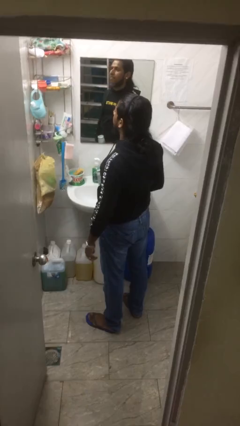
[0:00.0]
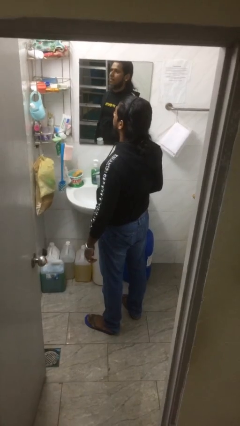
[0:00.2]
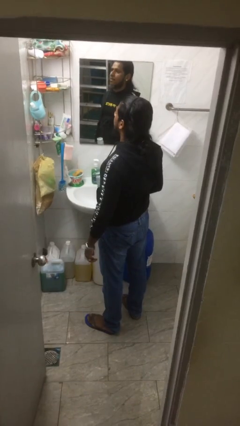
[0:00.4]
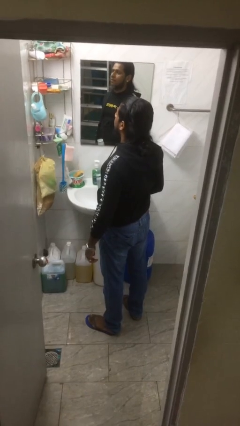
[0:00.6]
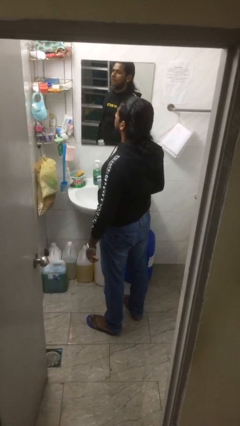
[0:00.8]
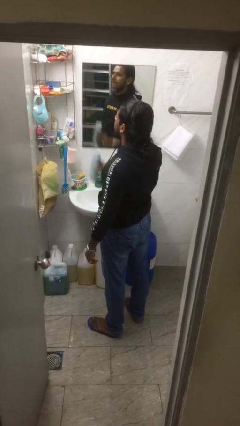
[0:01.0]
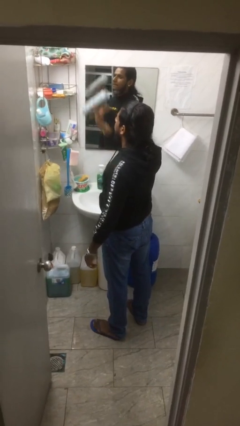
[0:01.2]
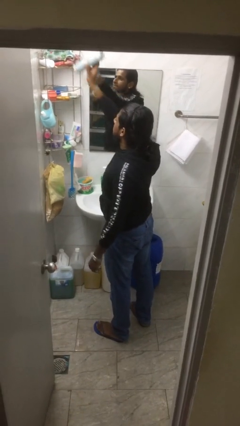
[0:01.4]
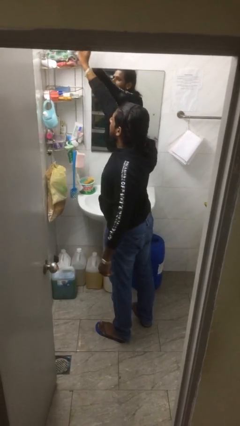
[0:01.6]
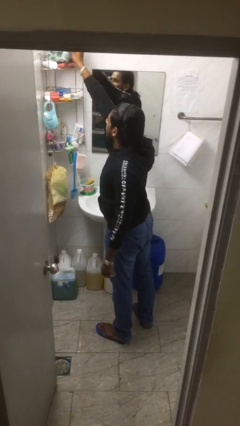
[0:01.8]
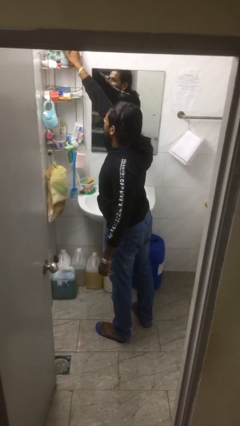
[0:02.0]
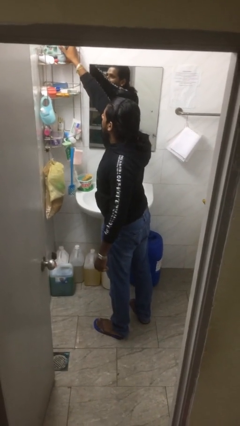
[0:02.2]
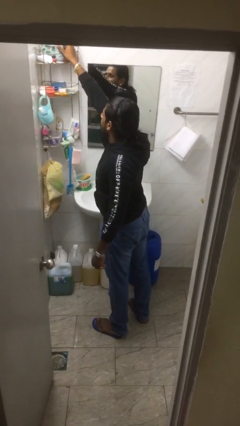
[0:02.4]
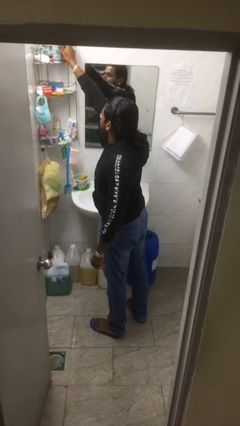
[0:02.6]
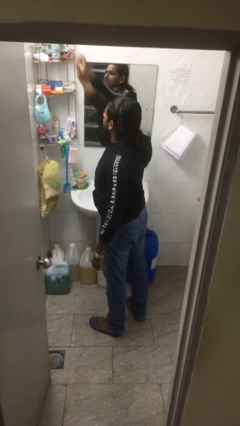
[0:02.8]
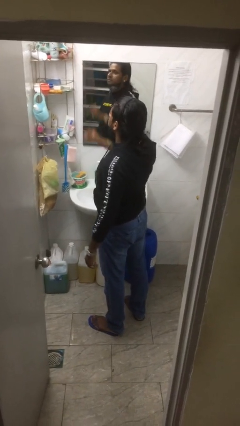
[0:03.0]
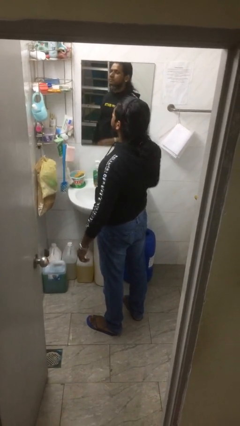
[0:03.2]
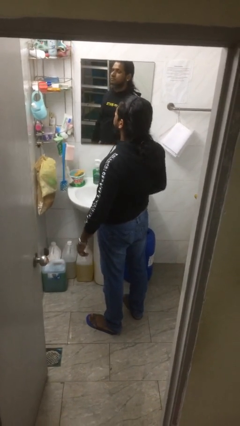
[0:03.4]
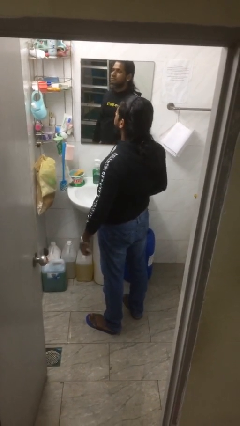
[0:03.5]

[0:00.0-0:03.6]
person puts down object on countertop

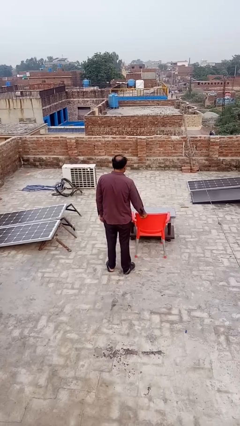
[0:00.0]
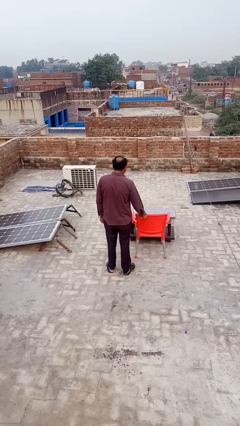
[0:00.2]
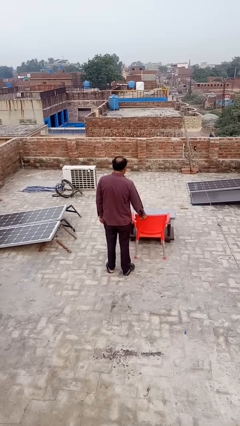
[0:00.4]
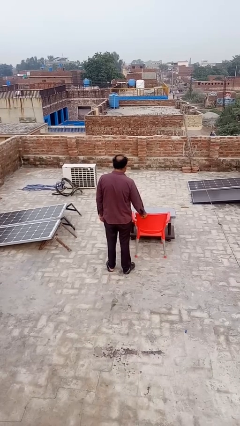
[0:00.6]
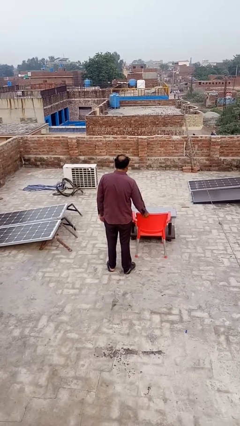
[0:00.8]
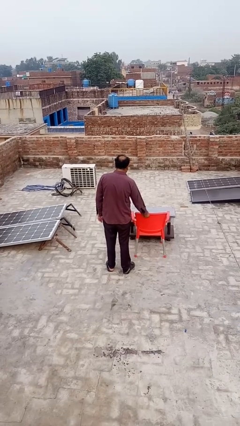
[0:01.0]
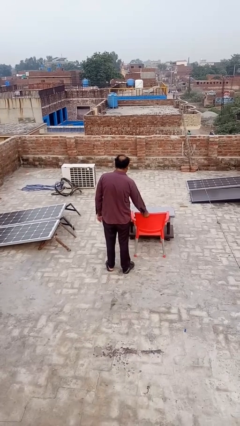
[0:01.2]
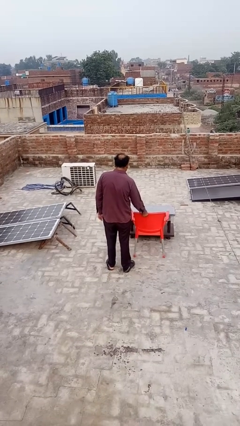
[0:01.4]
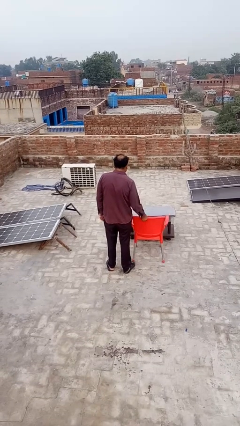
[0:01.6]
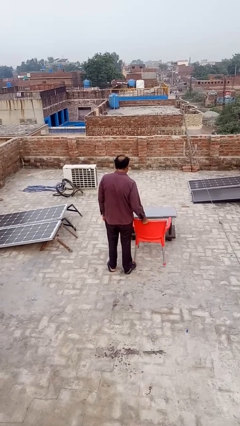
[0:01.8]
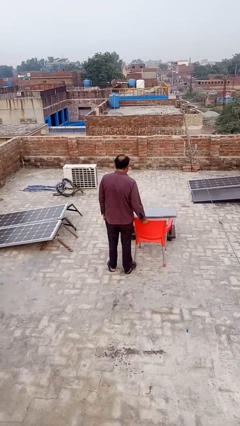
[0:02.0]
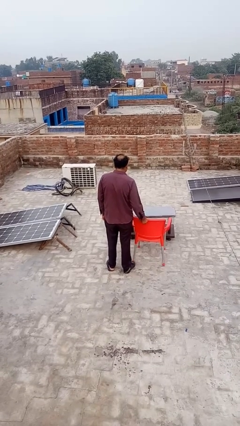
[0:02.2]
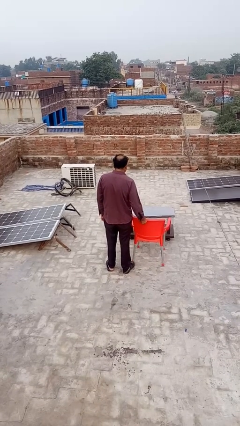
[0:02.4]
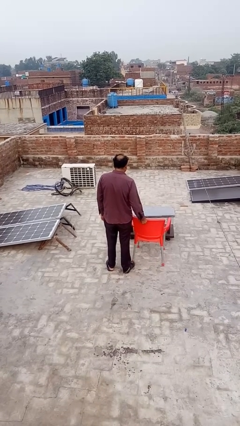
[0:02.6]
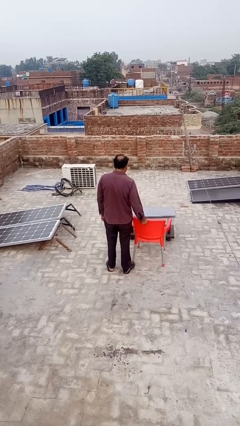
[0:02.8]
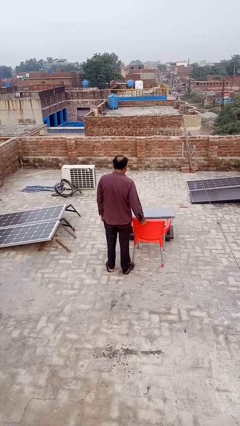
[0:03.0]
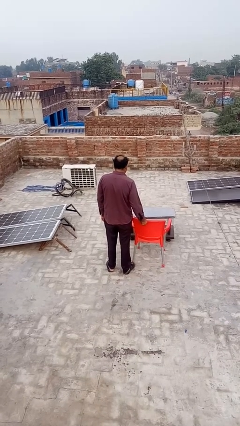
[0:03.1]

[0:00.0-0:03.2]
person pulls out chair

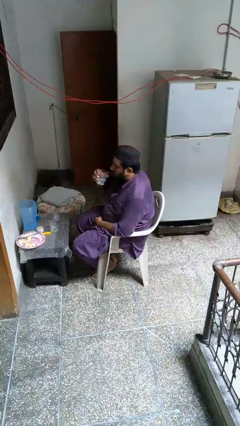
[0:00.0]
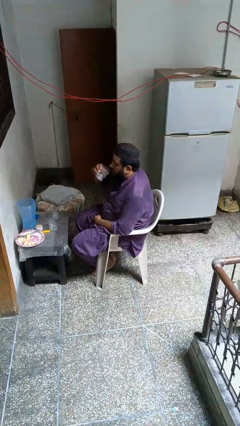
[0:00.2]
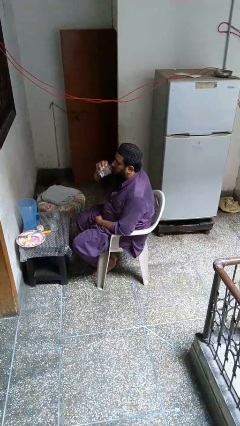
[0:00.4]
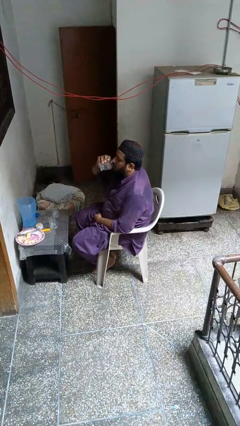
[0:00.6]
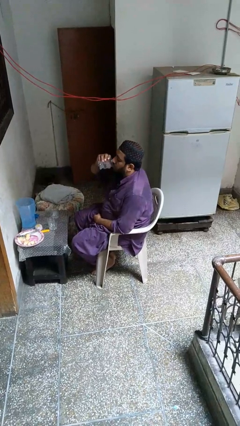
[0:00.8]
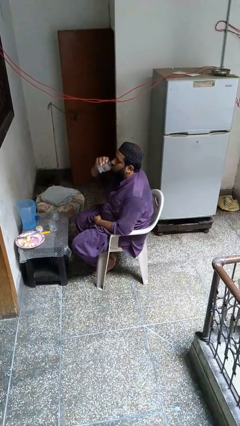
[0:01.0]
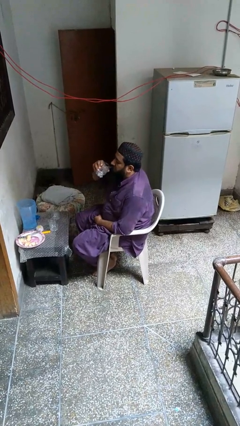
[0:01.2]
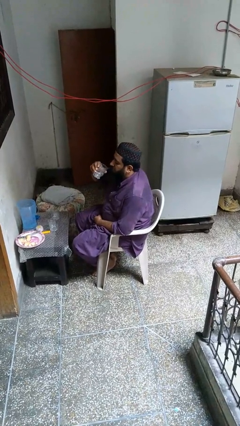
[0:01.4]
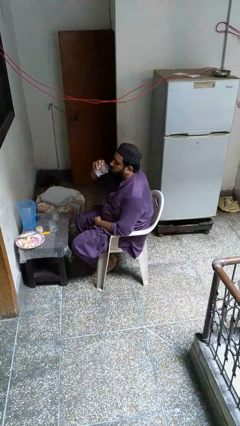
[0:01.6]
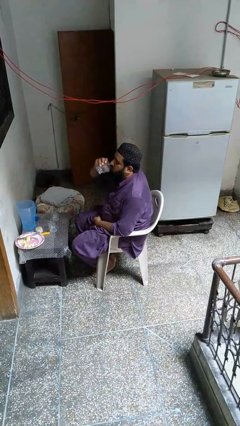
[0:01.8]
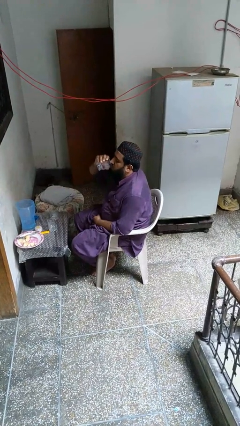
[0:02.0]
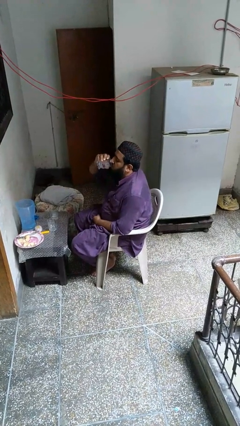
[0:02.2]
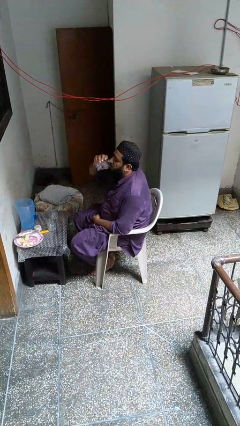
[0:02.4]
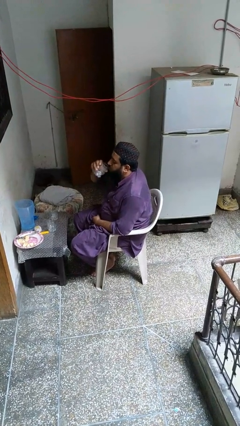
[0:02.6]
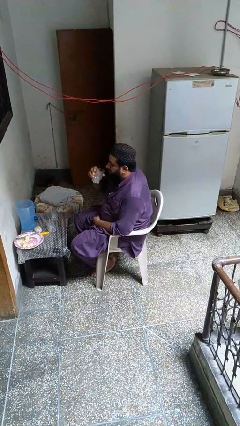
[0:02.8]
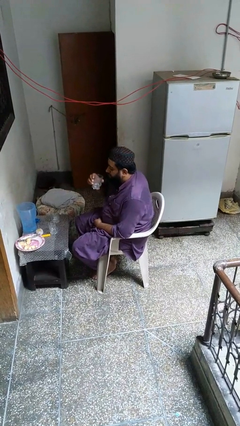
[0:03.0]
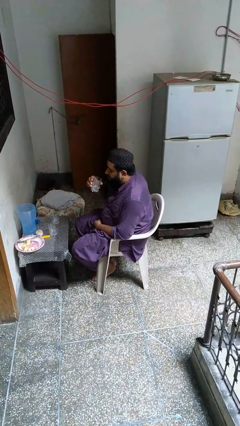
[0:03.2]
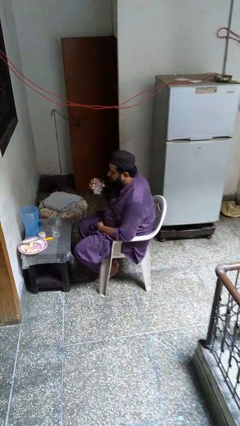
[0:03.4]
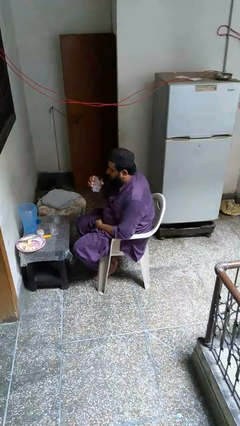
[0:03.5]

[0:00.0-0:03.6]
person drinks from shotglass

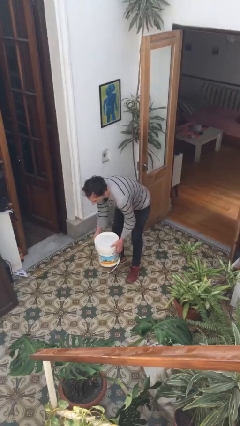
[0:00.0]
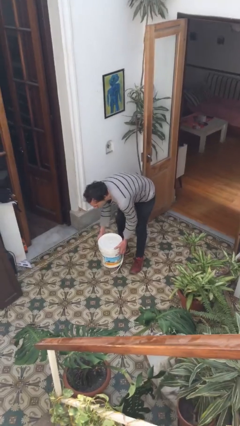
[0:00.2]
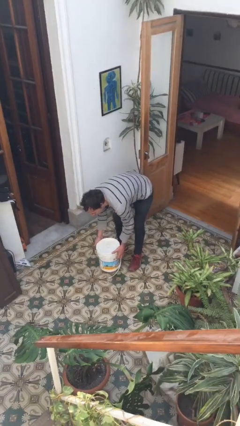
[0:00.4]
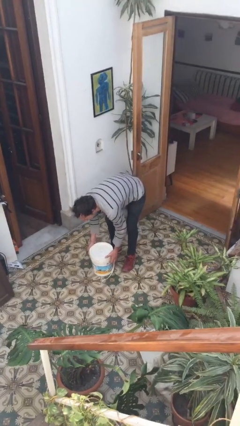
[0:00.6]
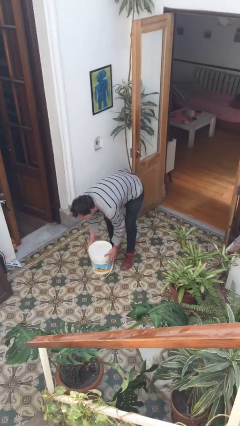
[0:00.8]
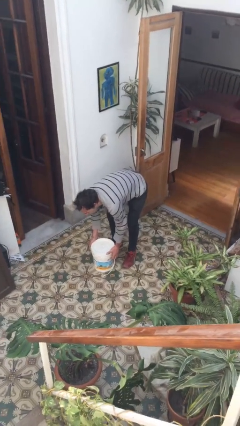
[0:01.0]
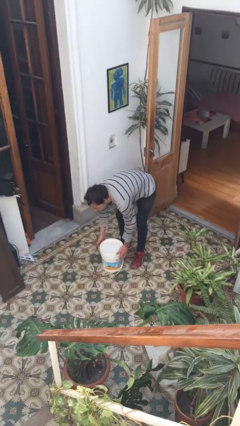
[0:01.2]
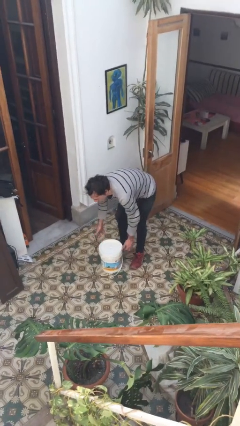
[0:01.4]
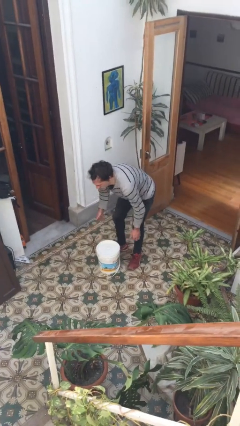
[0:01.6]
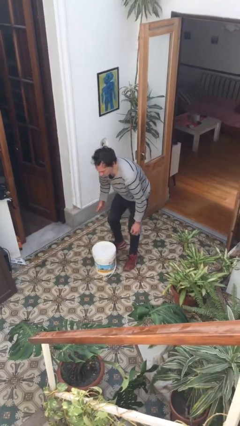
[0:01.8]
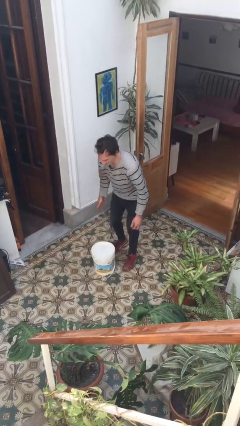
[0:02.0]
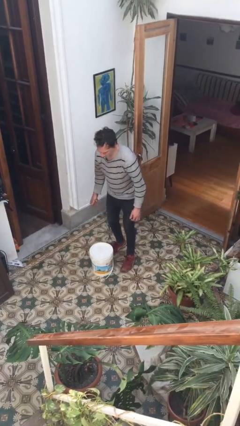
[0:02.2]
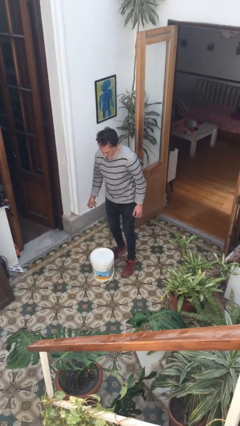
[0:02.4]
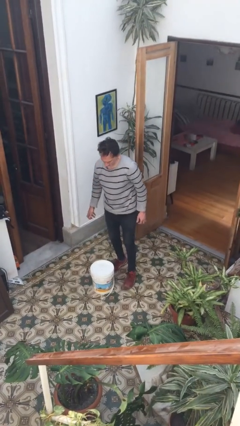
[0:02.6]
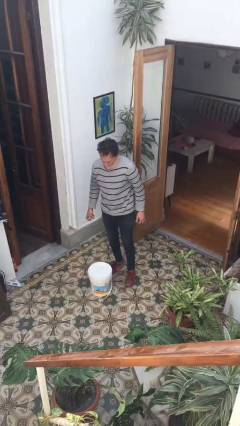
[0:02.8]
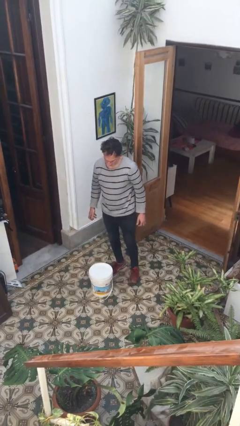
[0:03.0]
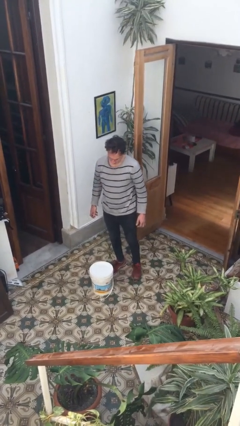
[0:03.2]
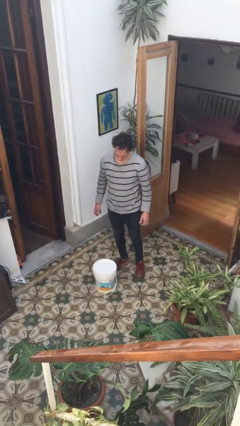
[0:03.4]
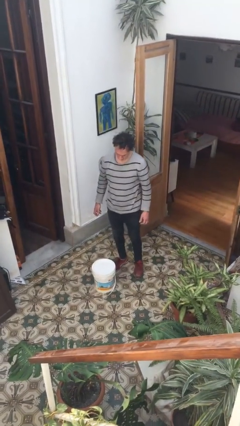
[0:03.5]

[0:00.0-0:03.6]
person puts down object on floor

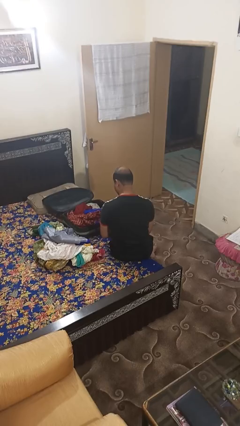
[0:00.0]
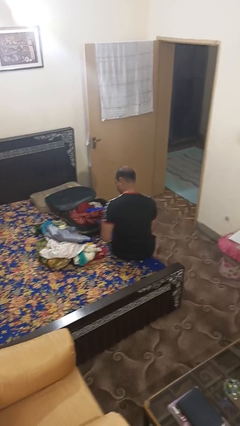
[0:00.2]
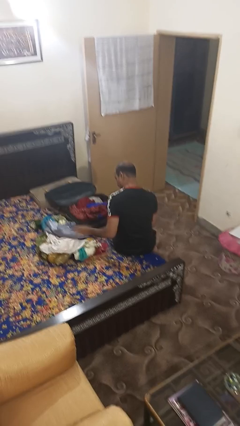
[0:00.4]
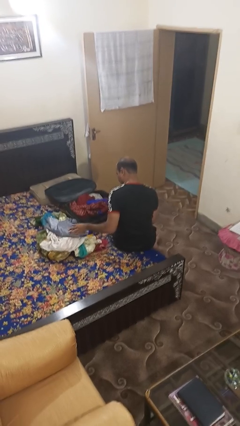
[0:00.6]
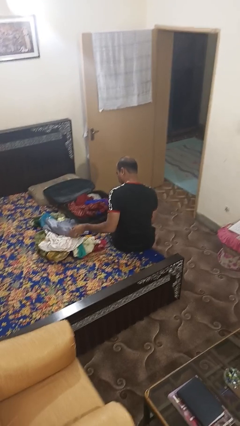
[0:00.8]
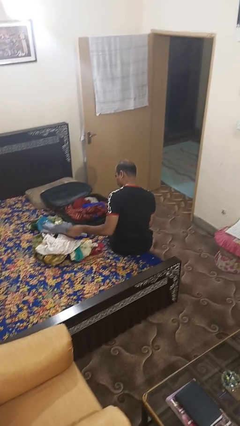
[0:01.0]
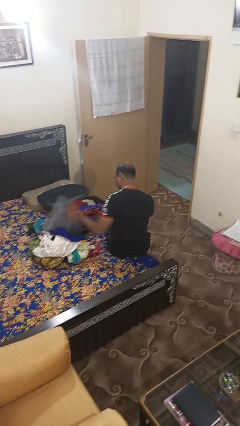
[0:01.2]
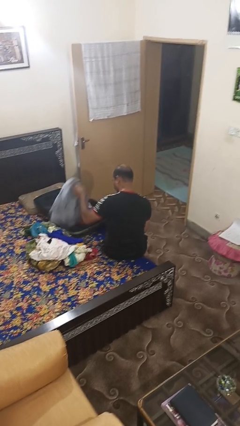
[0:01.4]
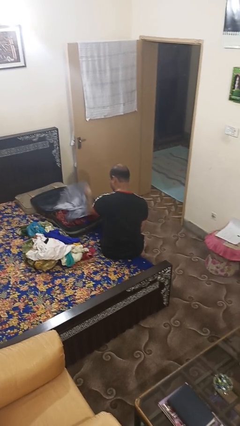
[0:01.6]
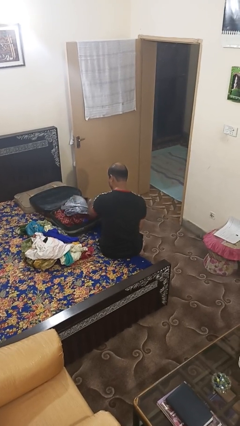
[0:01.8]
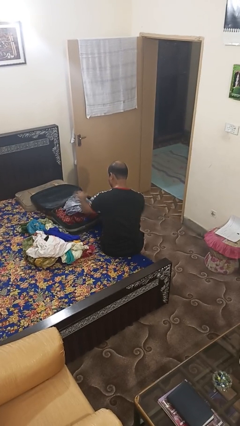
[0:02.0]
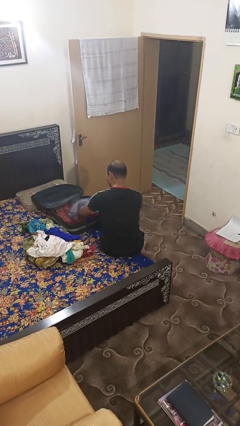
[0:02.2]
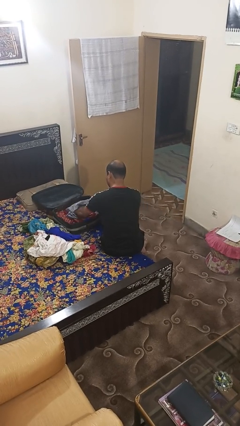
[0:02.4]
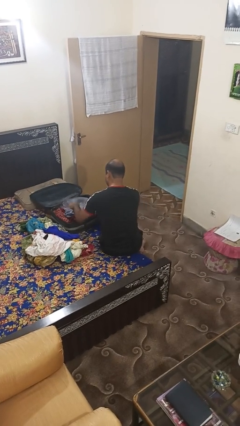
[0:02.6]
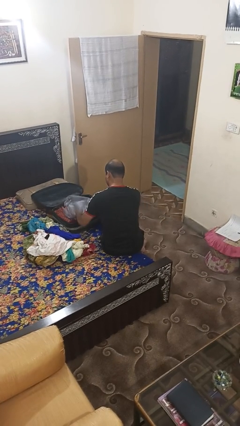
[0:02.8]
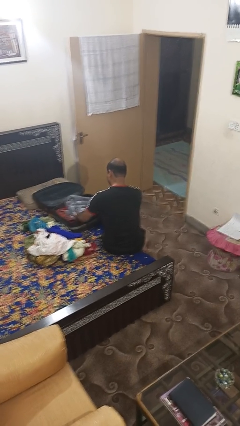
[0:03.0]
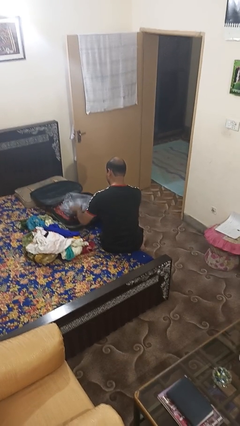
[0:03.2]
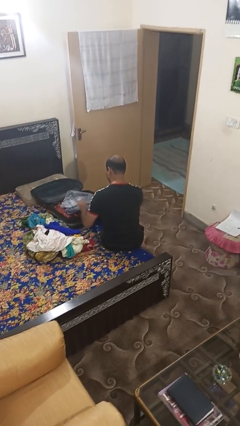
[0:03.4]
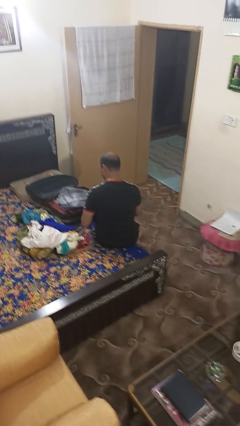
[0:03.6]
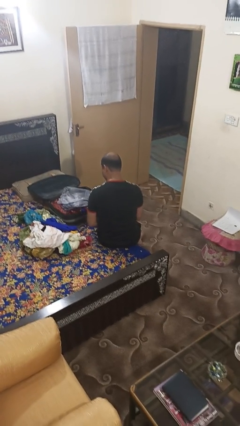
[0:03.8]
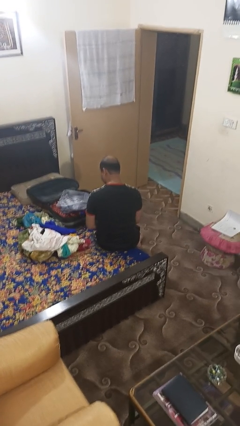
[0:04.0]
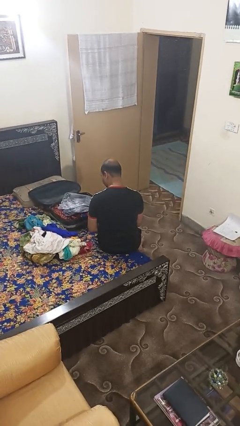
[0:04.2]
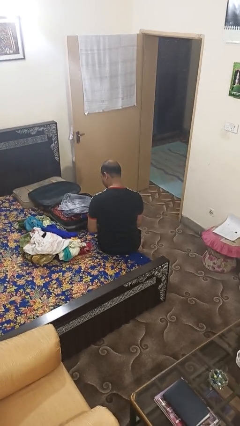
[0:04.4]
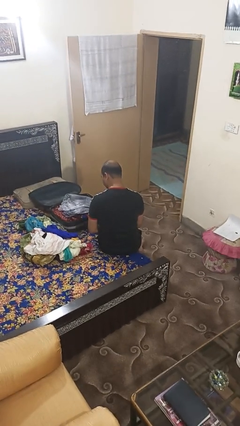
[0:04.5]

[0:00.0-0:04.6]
person loads clothes into suitcase
